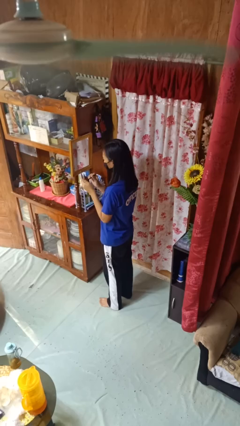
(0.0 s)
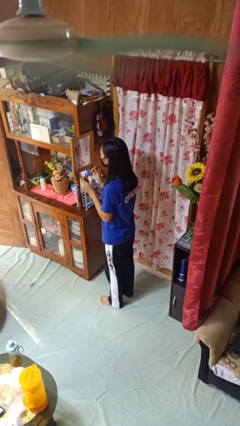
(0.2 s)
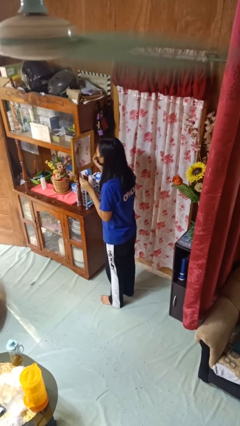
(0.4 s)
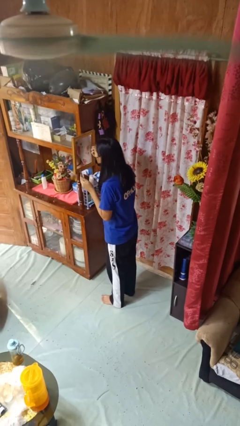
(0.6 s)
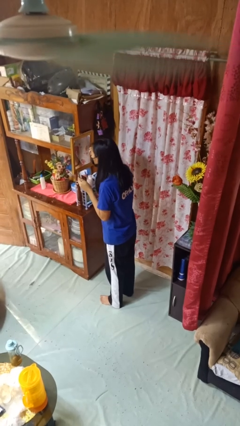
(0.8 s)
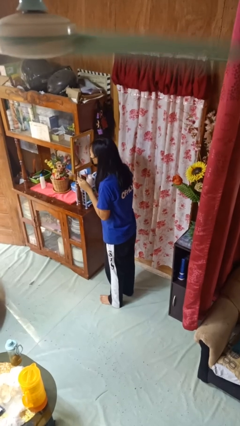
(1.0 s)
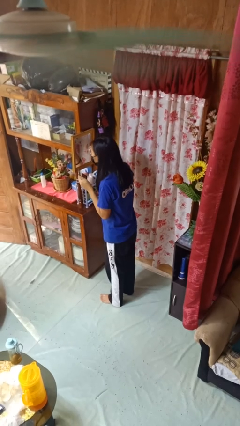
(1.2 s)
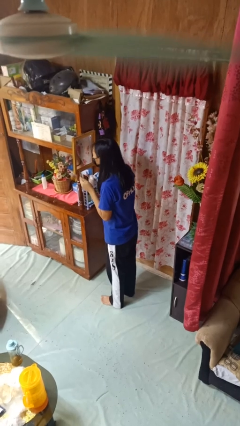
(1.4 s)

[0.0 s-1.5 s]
person applies eye makeup

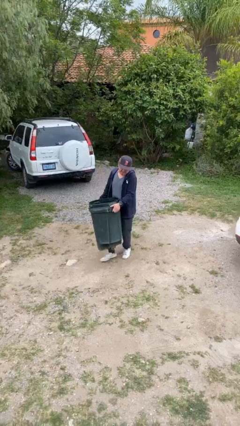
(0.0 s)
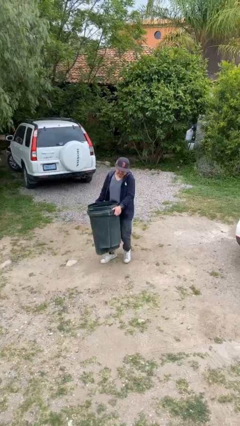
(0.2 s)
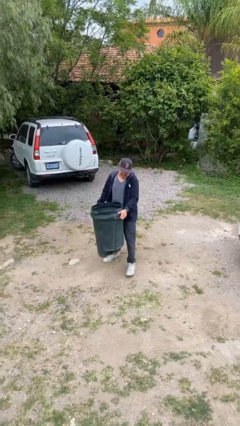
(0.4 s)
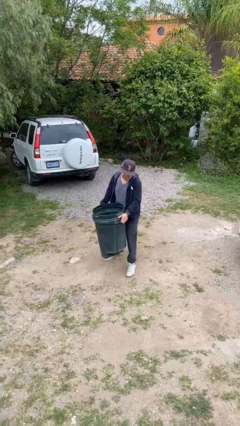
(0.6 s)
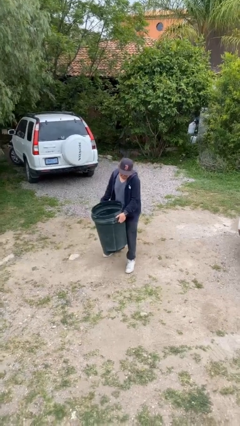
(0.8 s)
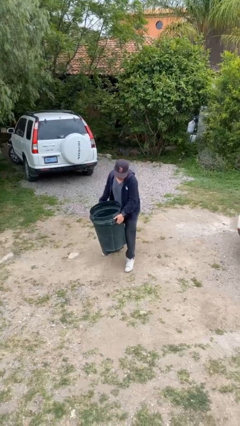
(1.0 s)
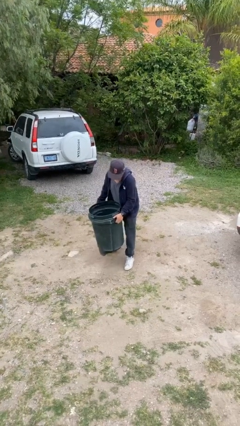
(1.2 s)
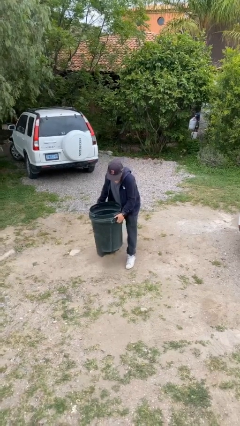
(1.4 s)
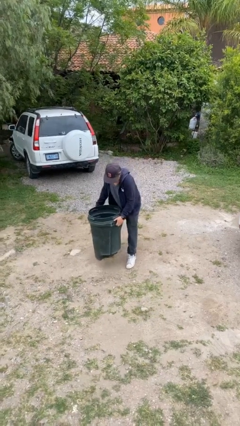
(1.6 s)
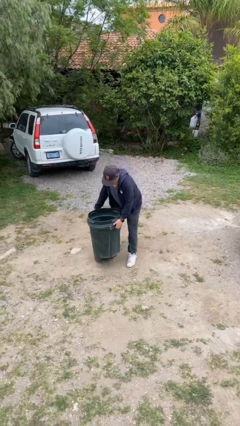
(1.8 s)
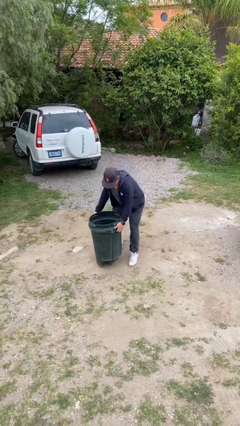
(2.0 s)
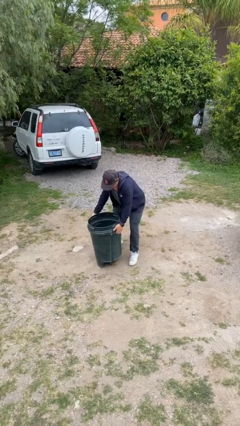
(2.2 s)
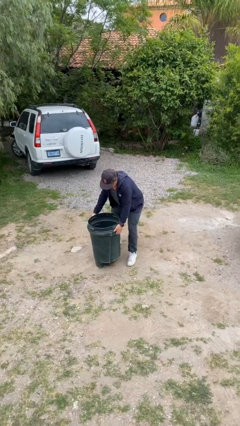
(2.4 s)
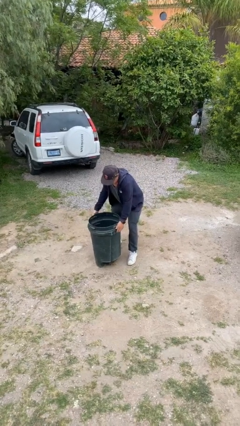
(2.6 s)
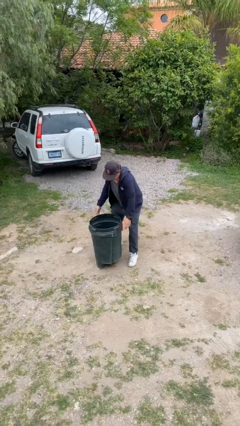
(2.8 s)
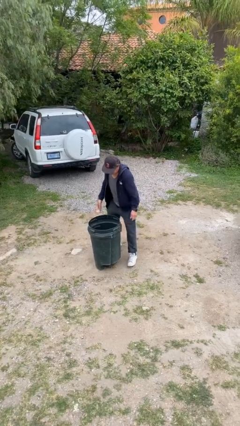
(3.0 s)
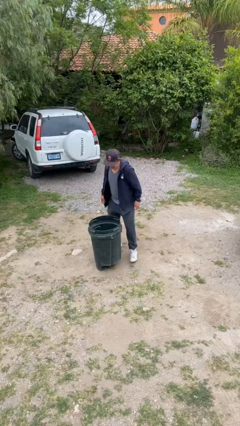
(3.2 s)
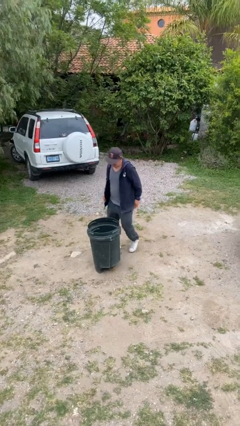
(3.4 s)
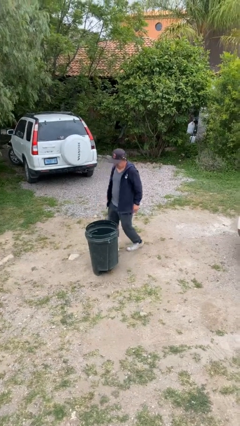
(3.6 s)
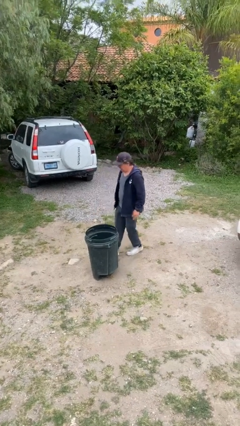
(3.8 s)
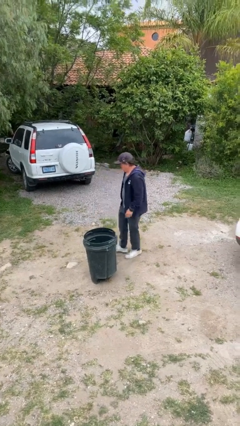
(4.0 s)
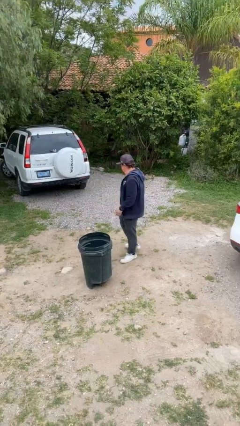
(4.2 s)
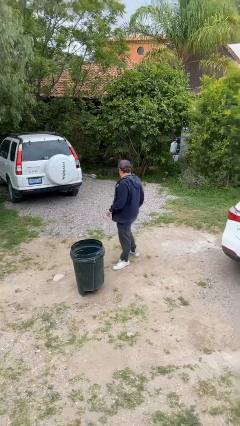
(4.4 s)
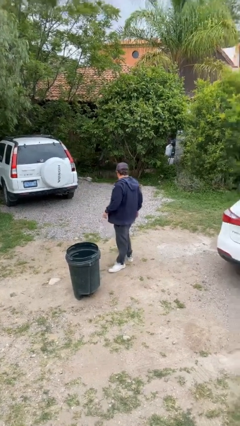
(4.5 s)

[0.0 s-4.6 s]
person puts down object on floor
